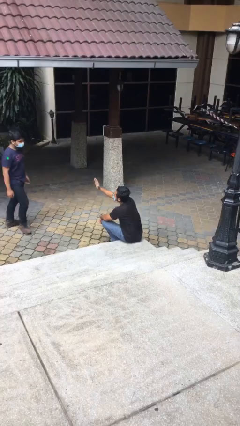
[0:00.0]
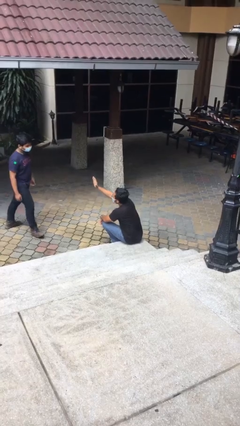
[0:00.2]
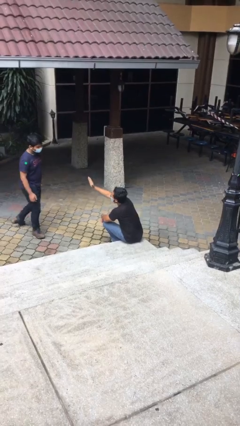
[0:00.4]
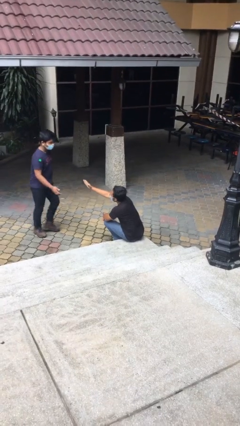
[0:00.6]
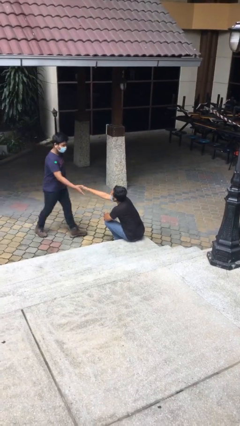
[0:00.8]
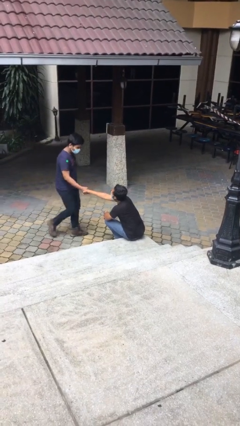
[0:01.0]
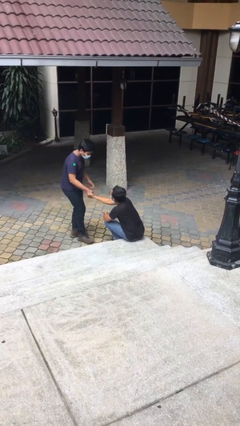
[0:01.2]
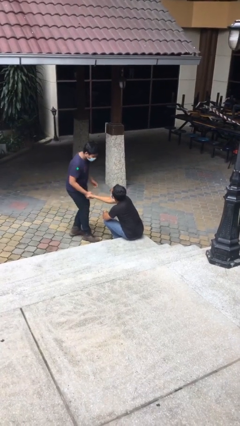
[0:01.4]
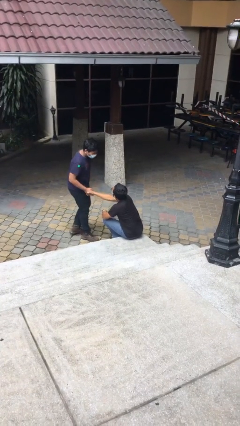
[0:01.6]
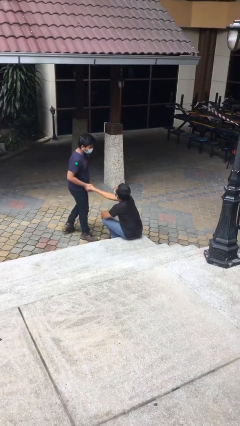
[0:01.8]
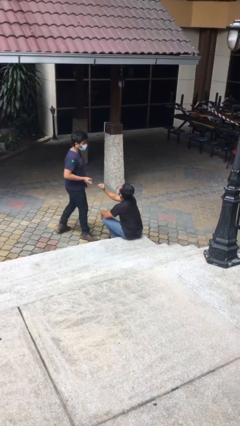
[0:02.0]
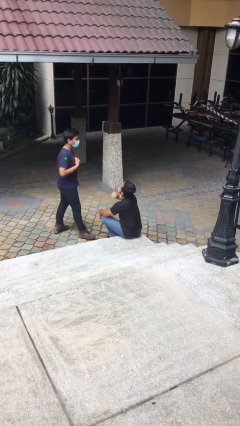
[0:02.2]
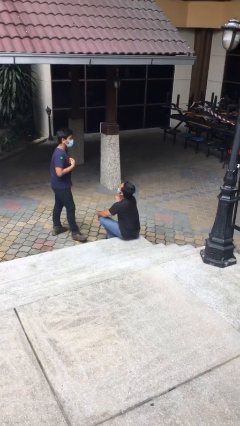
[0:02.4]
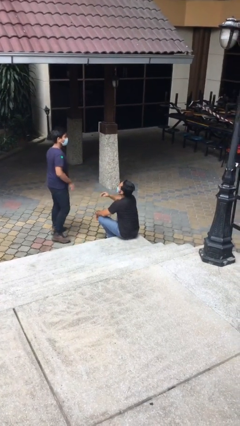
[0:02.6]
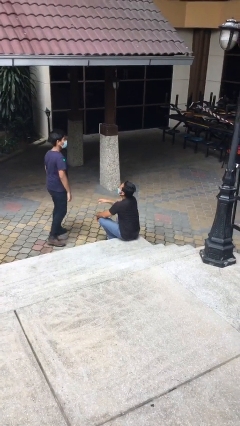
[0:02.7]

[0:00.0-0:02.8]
person shakes hand

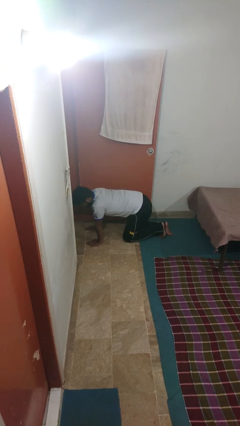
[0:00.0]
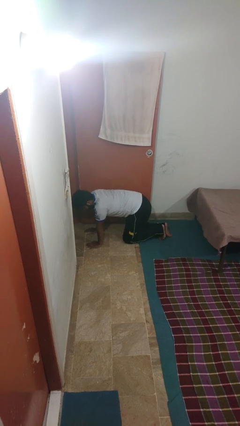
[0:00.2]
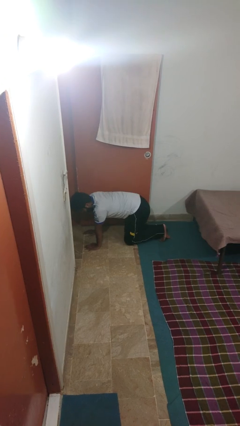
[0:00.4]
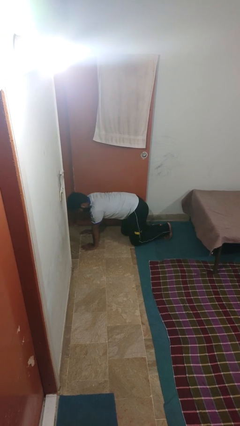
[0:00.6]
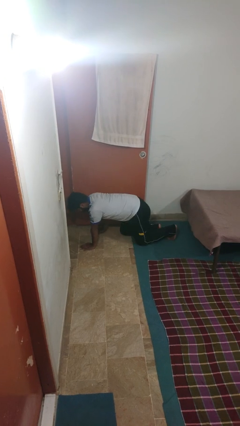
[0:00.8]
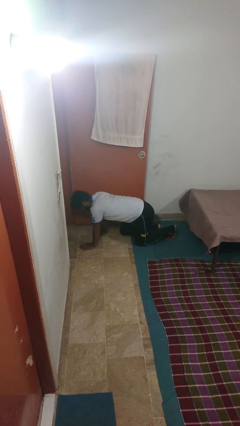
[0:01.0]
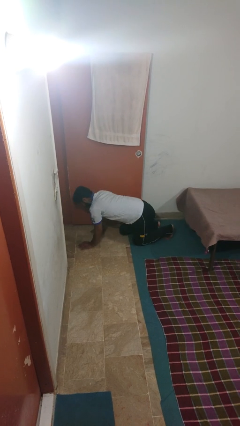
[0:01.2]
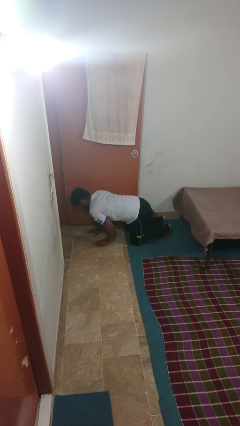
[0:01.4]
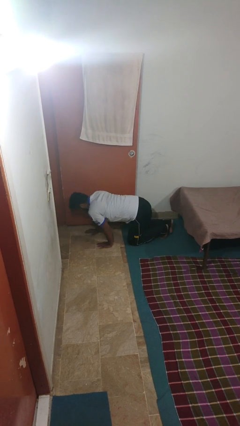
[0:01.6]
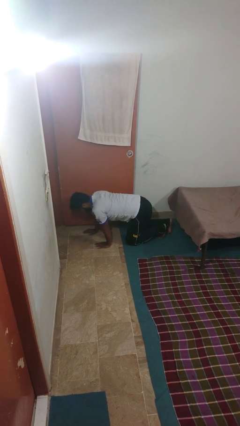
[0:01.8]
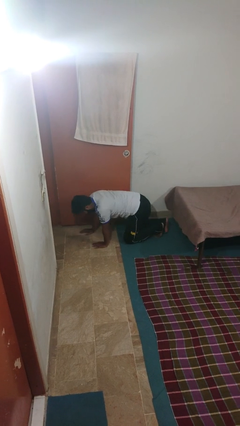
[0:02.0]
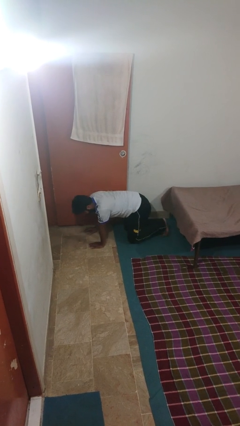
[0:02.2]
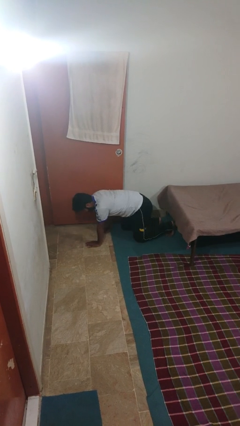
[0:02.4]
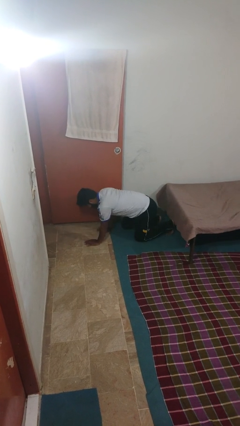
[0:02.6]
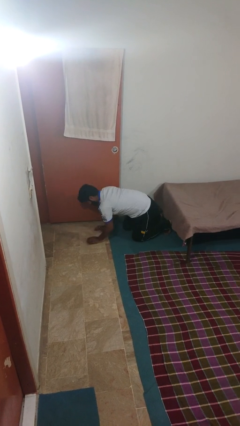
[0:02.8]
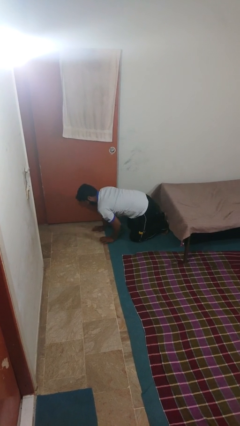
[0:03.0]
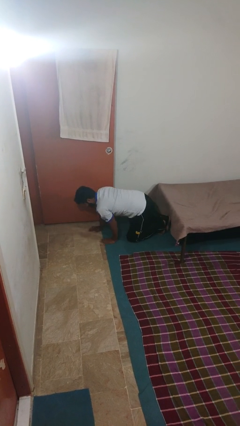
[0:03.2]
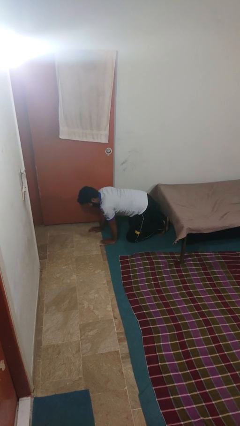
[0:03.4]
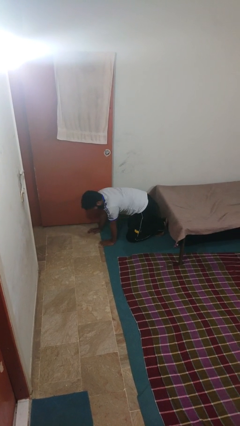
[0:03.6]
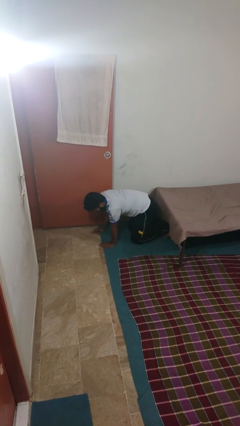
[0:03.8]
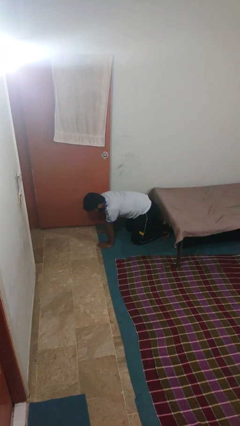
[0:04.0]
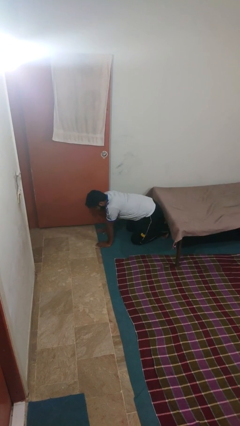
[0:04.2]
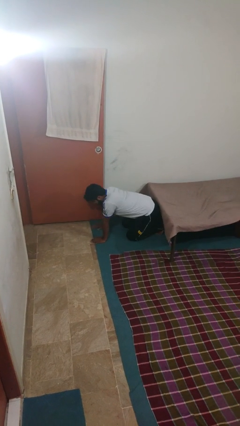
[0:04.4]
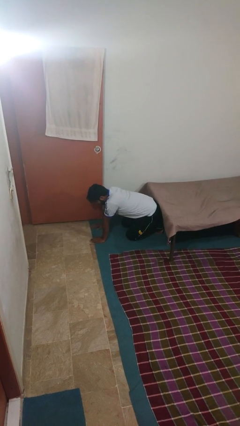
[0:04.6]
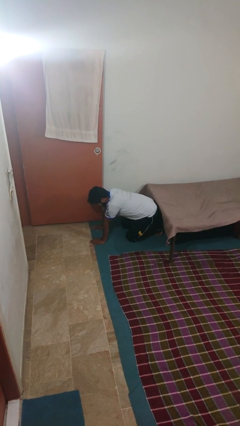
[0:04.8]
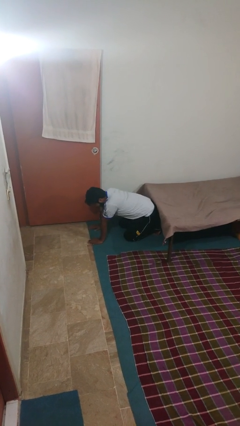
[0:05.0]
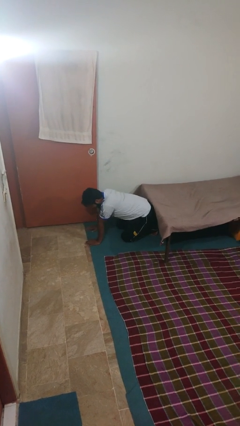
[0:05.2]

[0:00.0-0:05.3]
person crawls

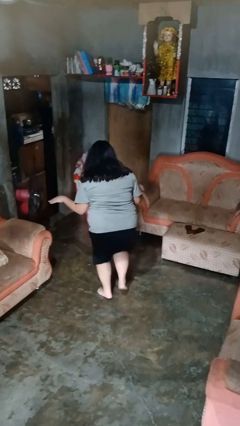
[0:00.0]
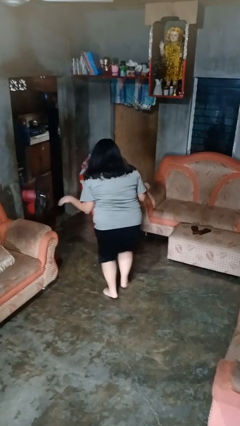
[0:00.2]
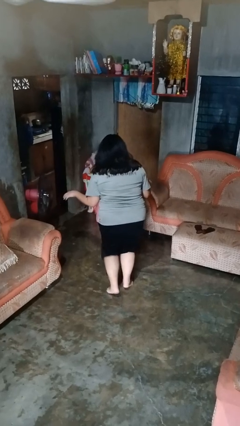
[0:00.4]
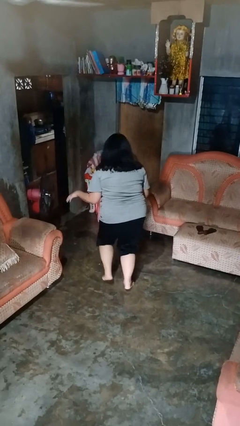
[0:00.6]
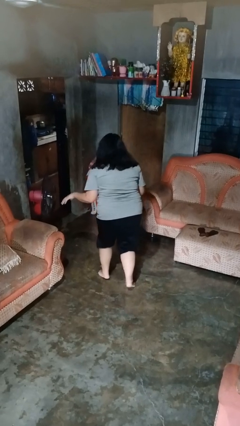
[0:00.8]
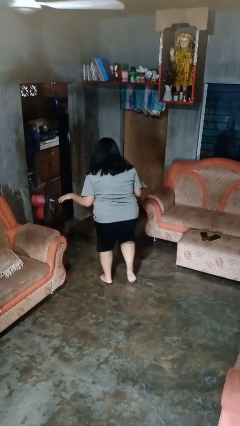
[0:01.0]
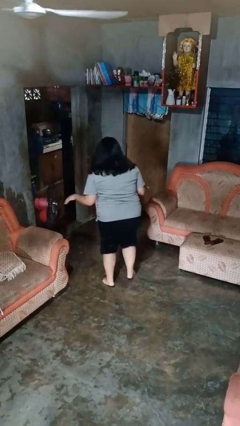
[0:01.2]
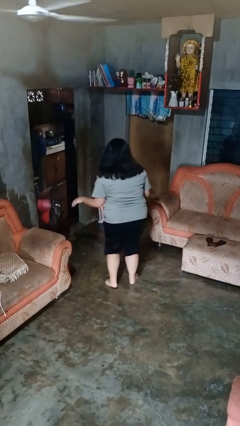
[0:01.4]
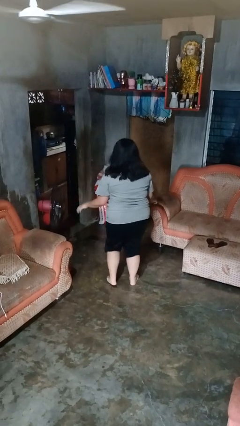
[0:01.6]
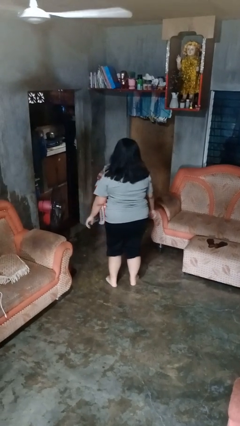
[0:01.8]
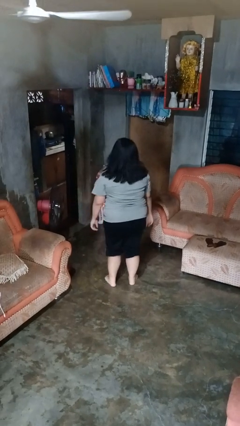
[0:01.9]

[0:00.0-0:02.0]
person walks tiptoe

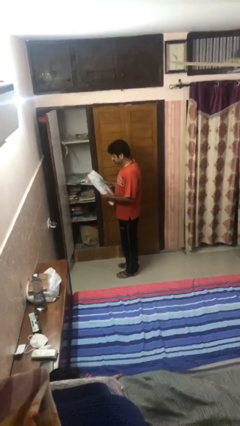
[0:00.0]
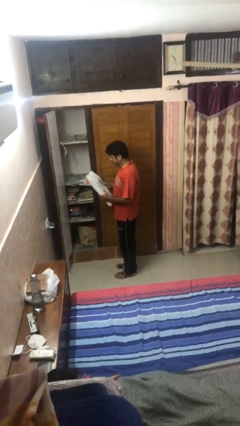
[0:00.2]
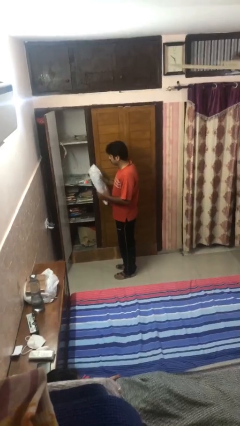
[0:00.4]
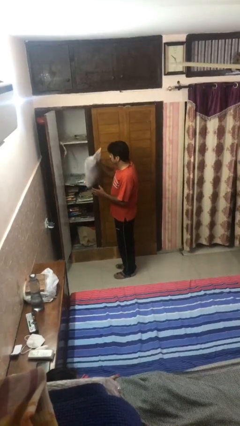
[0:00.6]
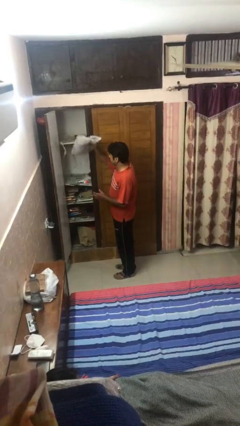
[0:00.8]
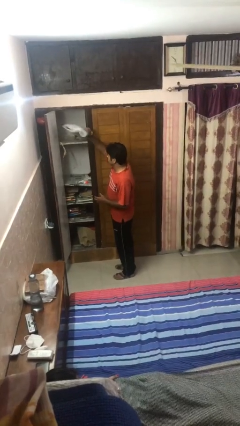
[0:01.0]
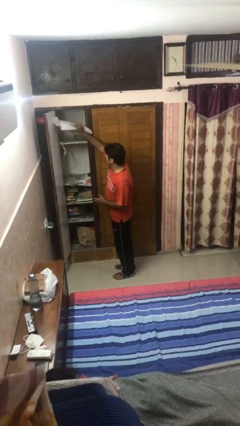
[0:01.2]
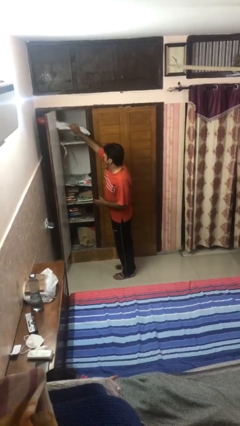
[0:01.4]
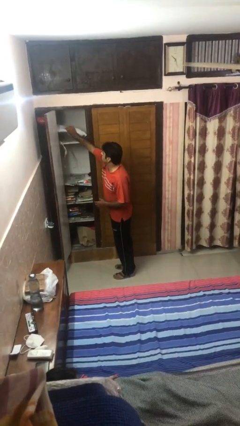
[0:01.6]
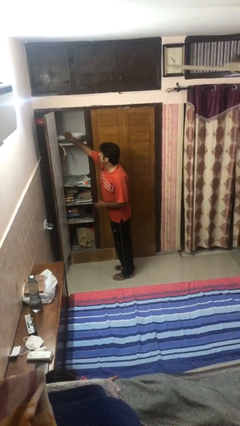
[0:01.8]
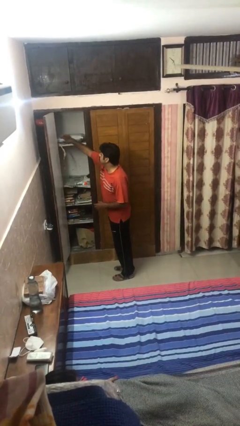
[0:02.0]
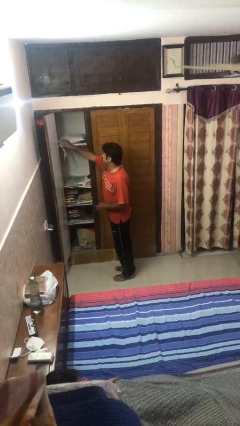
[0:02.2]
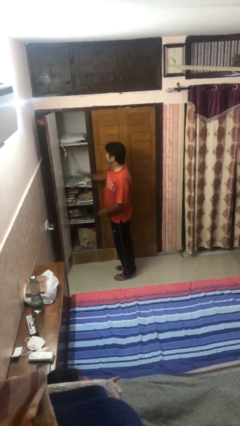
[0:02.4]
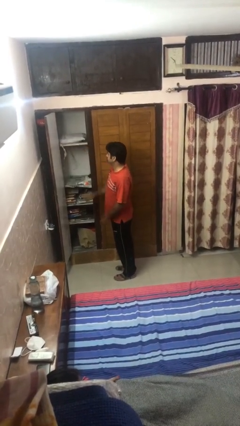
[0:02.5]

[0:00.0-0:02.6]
person puts down object on shelf

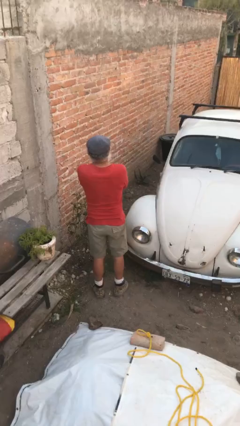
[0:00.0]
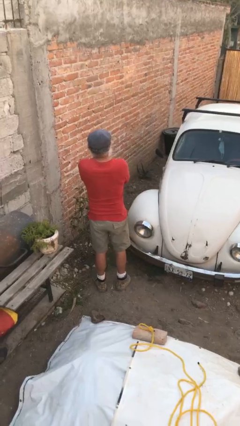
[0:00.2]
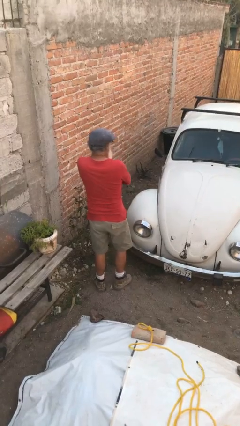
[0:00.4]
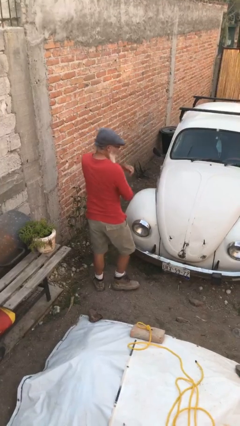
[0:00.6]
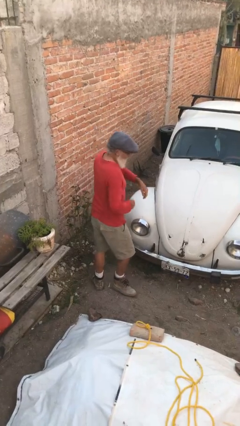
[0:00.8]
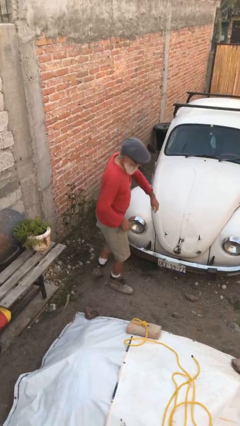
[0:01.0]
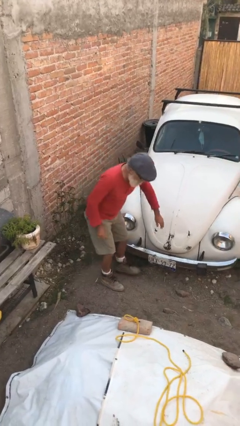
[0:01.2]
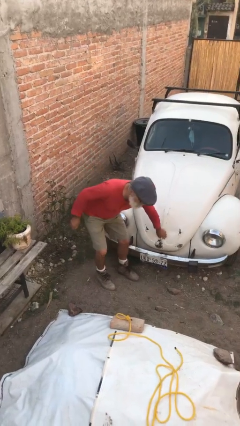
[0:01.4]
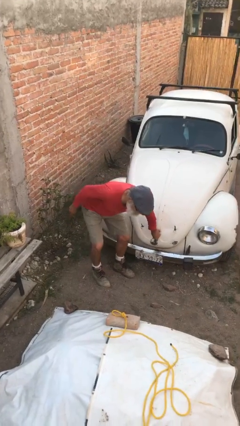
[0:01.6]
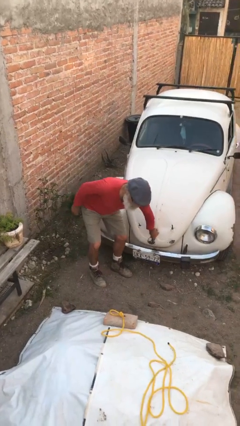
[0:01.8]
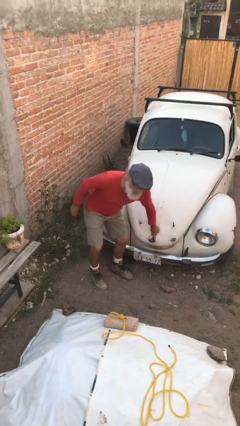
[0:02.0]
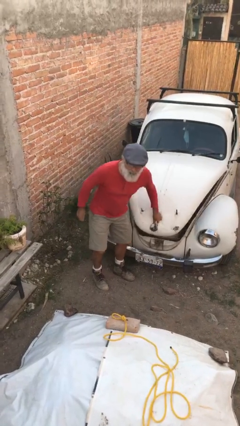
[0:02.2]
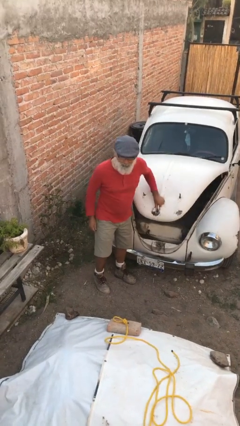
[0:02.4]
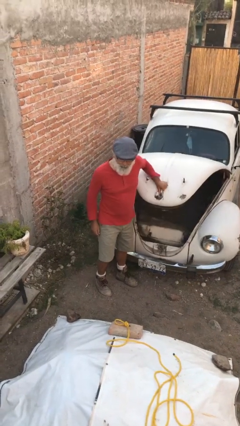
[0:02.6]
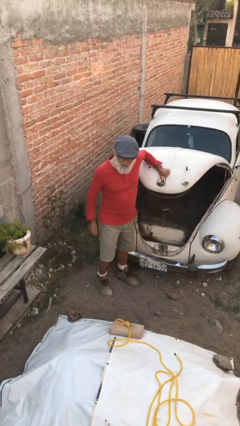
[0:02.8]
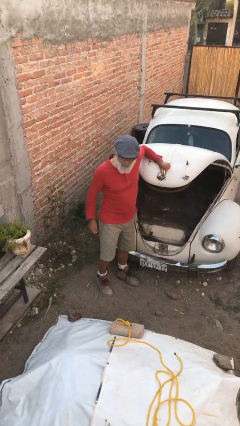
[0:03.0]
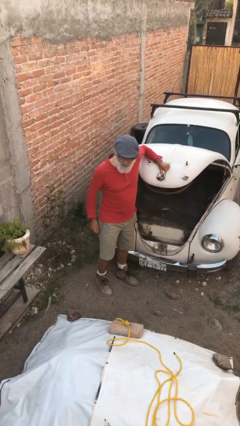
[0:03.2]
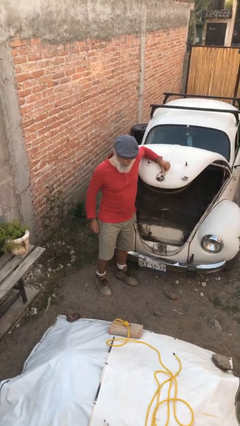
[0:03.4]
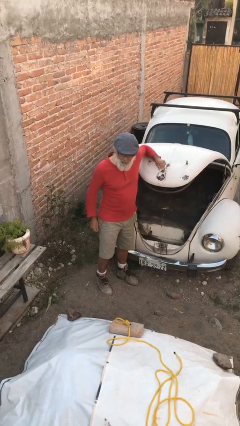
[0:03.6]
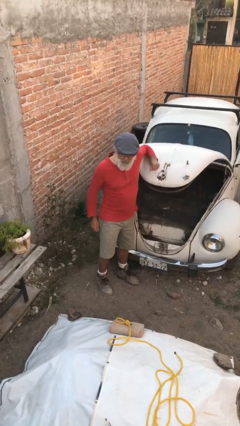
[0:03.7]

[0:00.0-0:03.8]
person opens car trunk

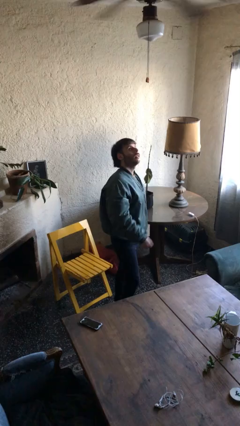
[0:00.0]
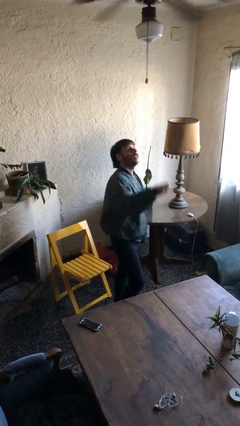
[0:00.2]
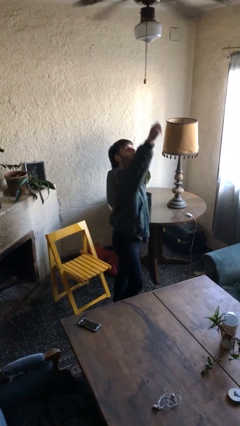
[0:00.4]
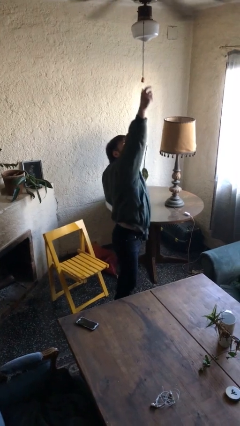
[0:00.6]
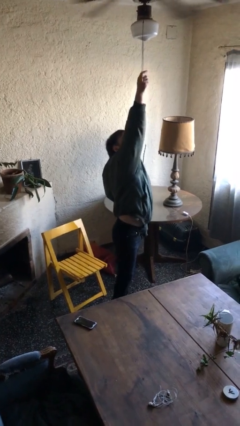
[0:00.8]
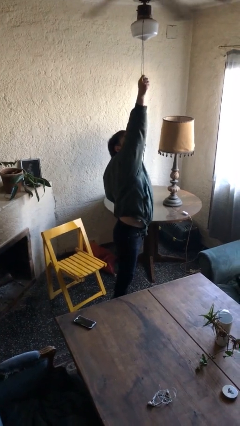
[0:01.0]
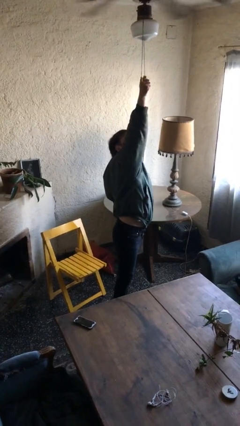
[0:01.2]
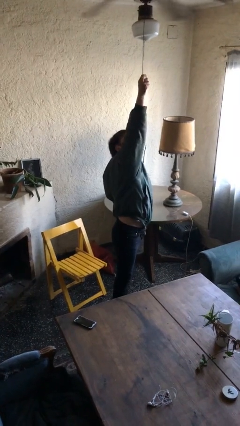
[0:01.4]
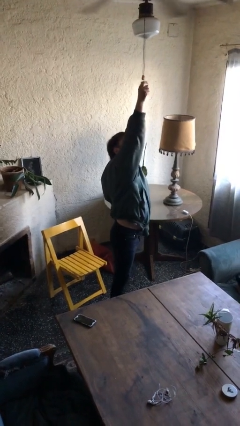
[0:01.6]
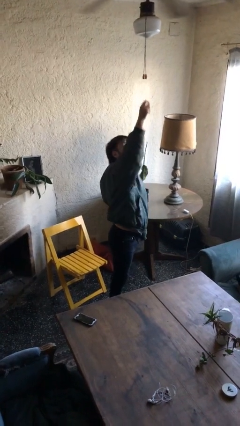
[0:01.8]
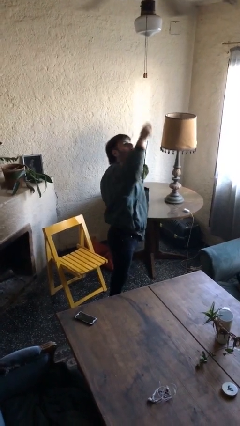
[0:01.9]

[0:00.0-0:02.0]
person turns on fan
